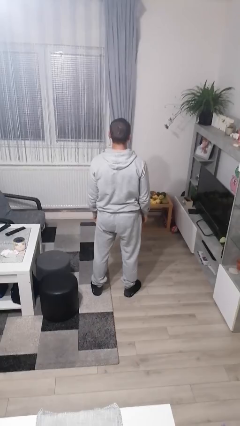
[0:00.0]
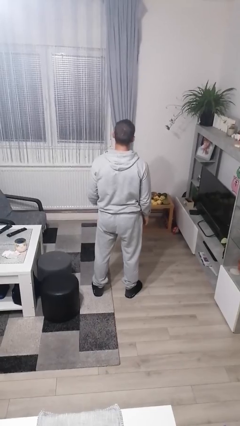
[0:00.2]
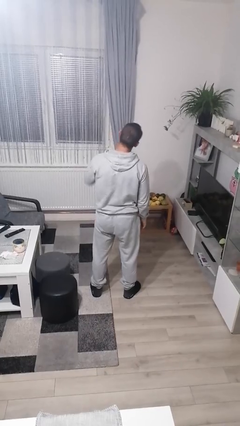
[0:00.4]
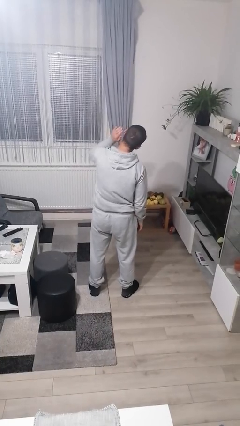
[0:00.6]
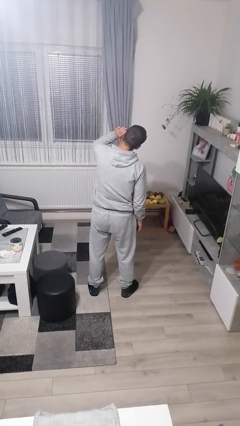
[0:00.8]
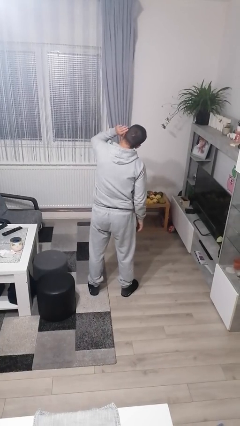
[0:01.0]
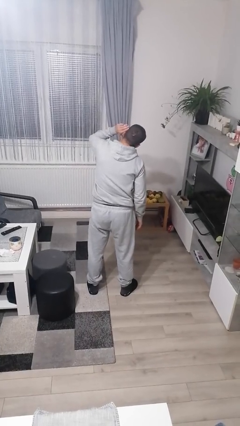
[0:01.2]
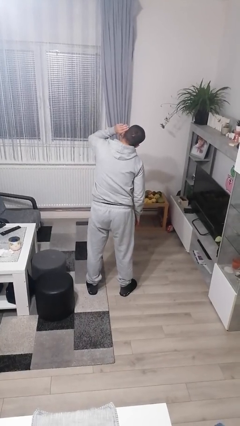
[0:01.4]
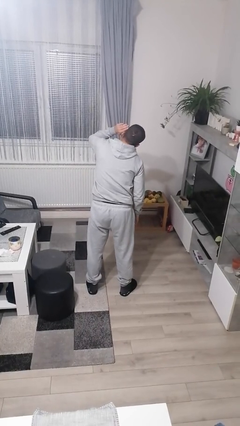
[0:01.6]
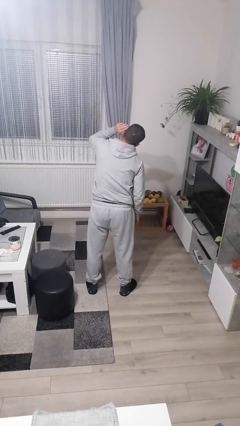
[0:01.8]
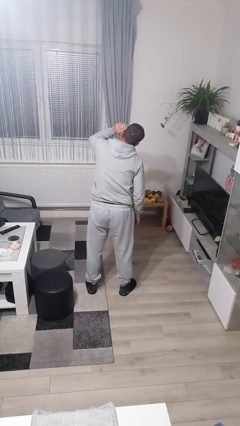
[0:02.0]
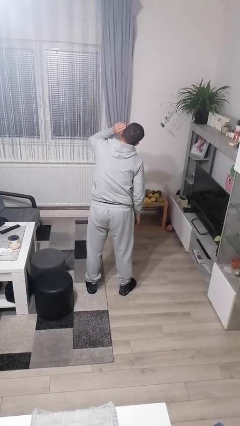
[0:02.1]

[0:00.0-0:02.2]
person gestures listen closely

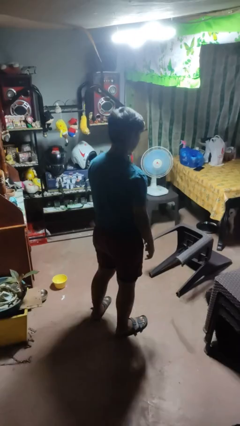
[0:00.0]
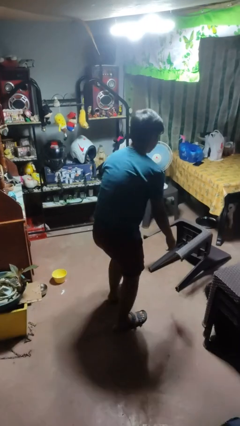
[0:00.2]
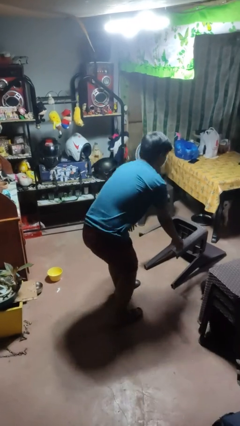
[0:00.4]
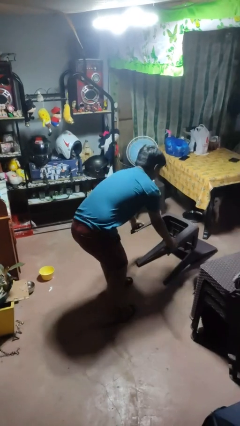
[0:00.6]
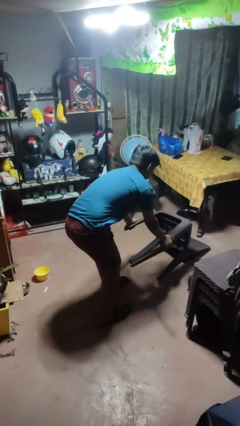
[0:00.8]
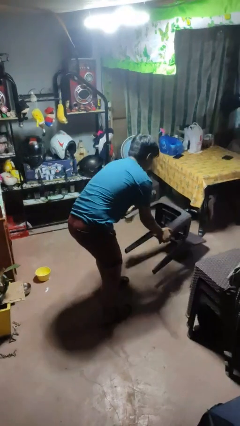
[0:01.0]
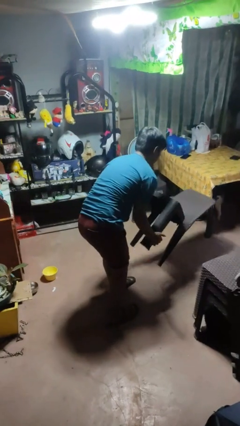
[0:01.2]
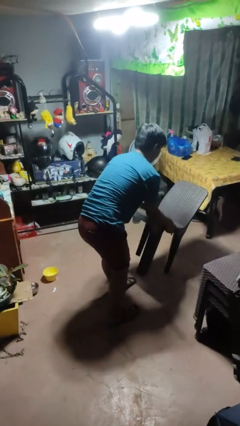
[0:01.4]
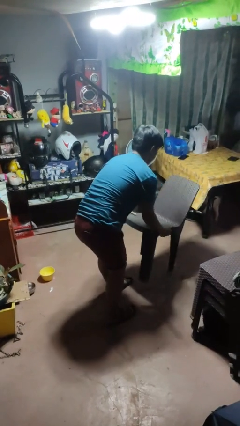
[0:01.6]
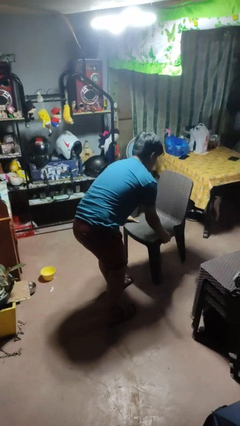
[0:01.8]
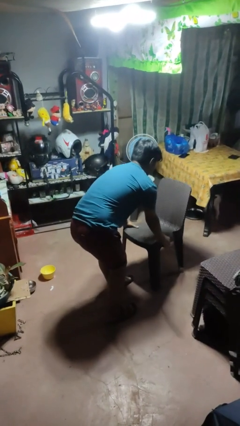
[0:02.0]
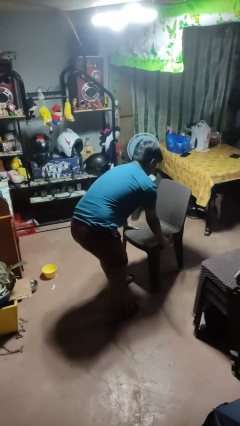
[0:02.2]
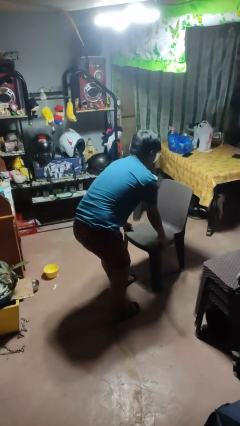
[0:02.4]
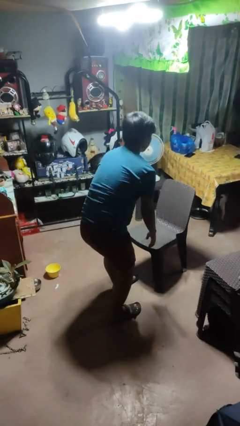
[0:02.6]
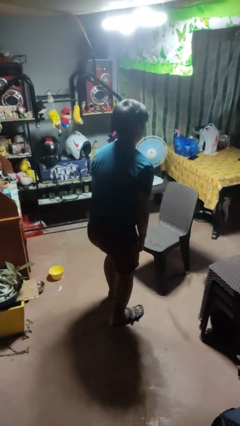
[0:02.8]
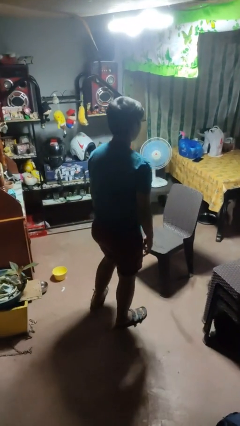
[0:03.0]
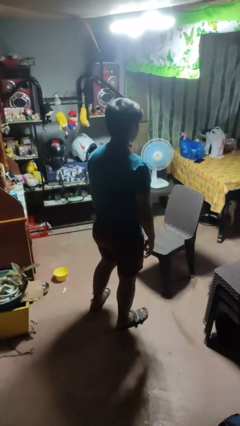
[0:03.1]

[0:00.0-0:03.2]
person sets upright furniture

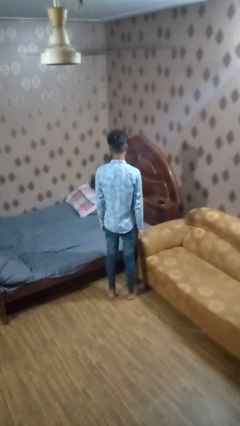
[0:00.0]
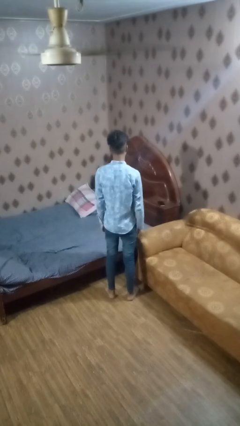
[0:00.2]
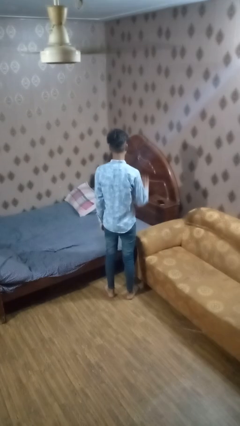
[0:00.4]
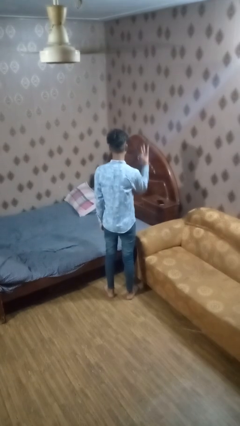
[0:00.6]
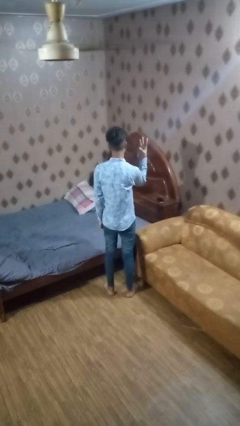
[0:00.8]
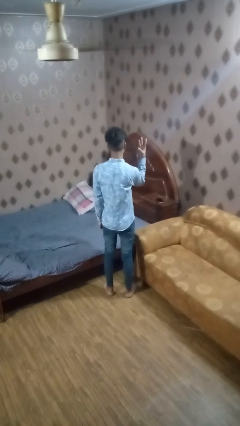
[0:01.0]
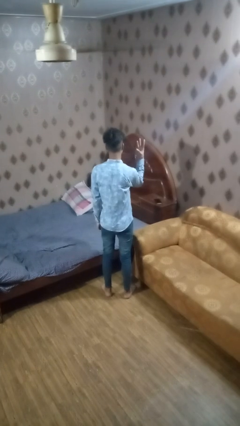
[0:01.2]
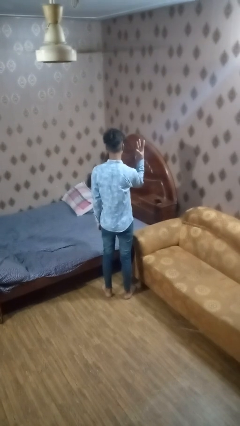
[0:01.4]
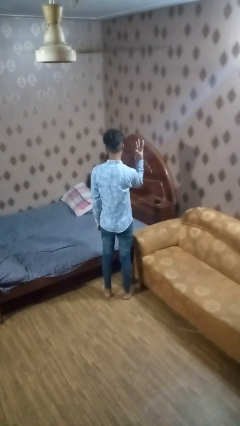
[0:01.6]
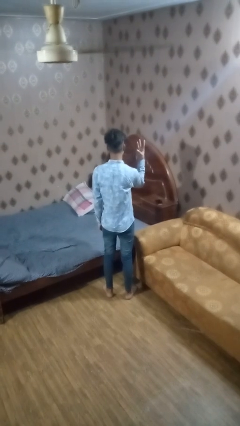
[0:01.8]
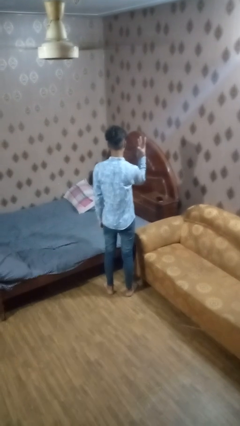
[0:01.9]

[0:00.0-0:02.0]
person gestures number three

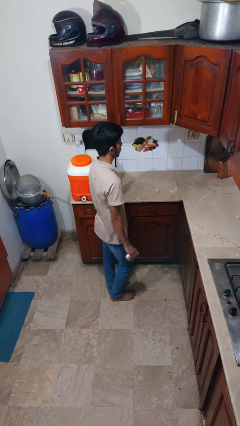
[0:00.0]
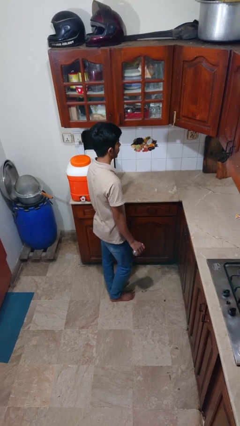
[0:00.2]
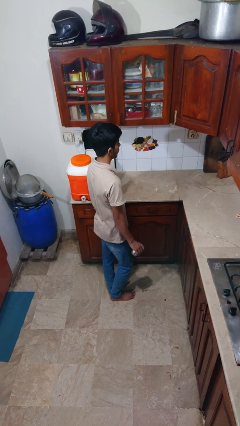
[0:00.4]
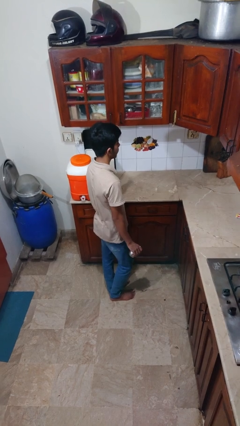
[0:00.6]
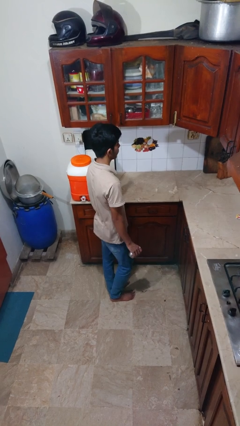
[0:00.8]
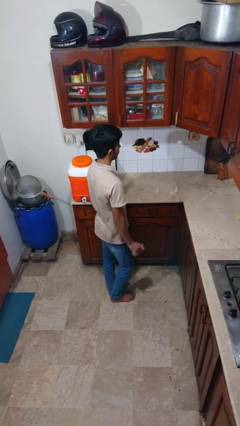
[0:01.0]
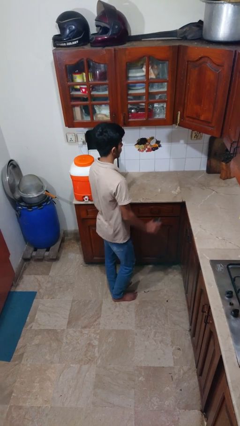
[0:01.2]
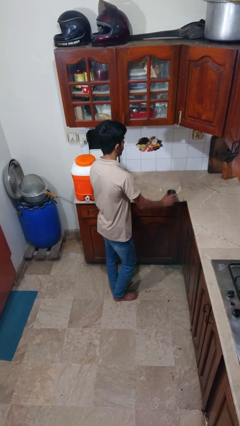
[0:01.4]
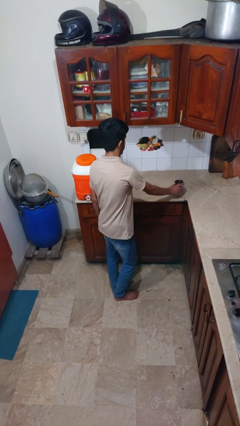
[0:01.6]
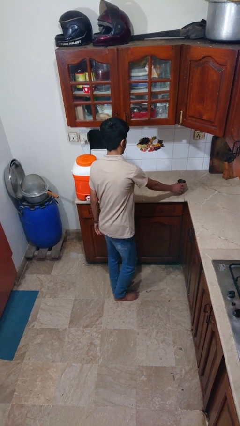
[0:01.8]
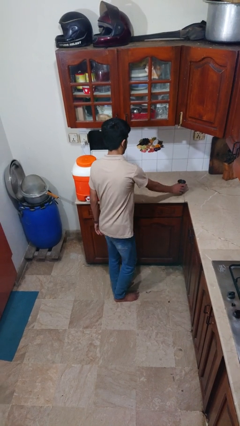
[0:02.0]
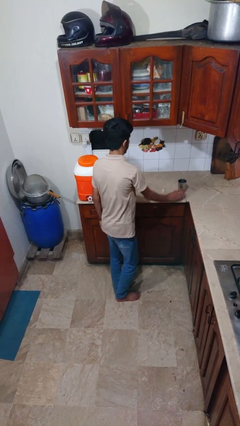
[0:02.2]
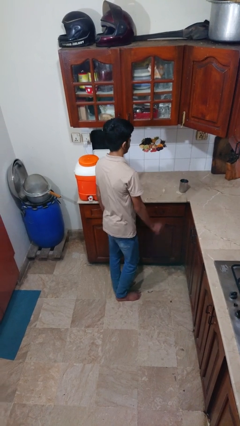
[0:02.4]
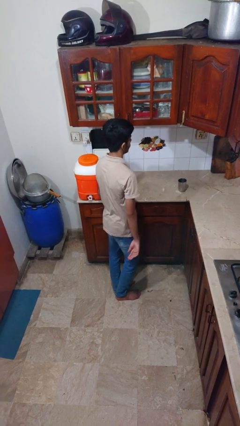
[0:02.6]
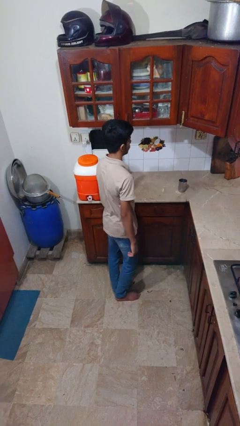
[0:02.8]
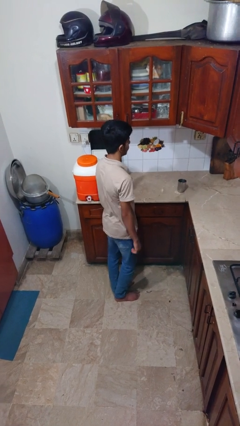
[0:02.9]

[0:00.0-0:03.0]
person puts down object on countertop

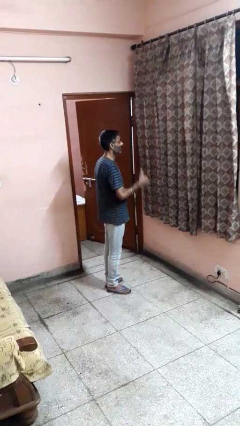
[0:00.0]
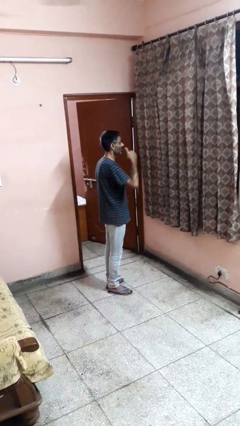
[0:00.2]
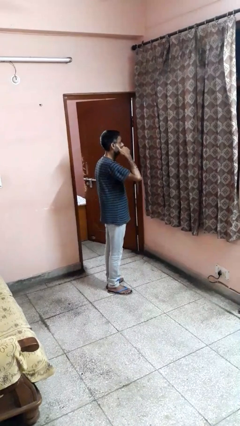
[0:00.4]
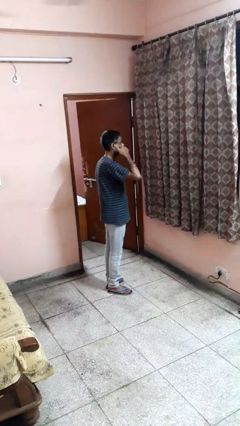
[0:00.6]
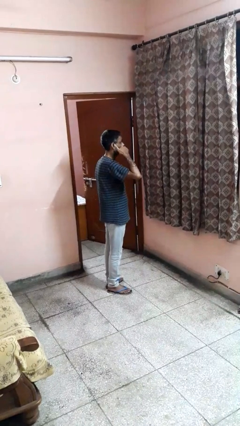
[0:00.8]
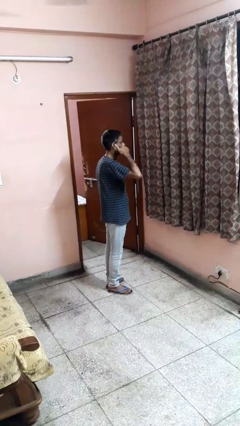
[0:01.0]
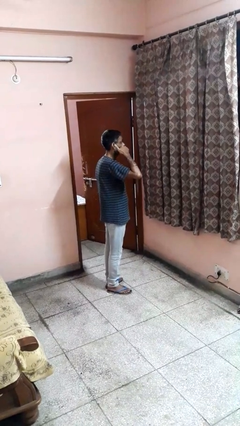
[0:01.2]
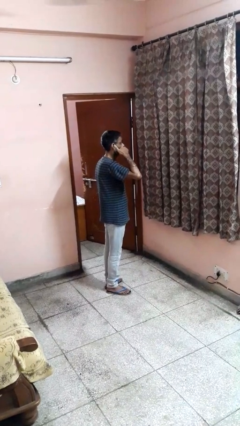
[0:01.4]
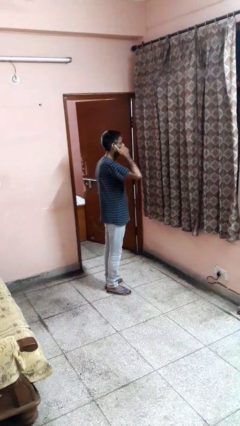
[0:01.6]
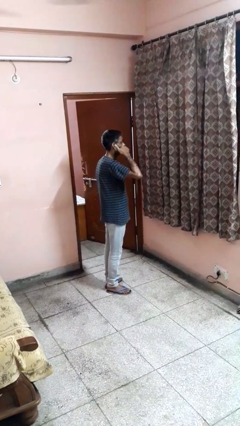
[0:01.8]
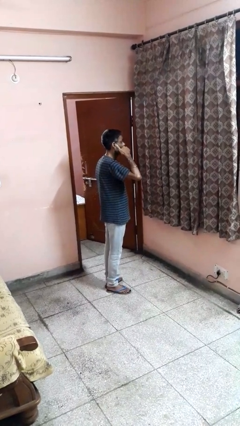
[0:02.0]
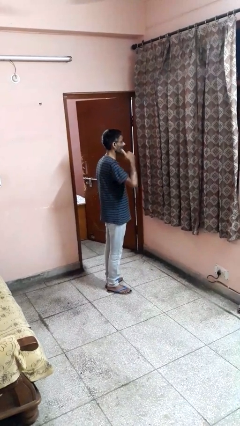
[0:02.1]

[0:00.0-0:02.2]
person gestures call me

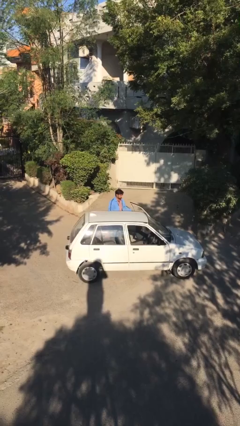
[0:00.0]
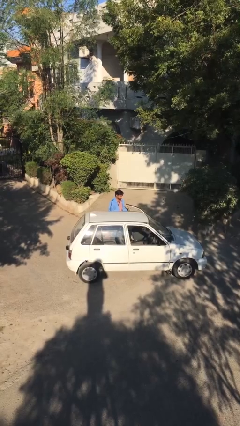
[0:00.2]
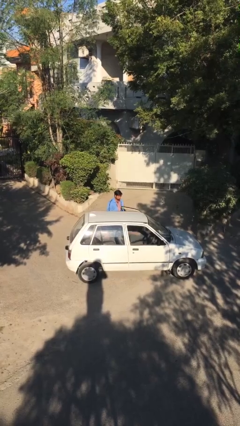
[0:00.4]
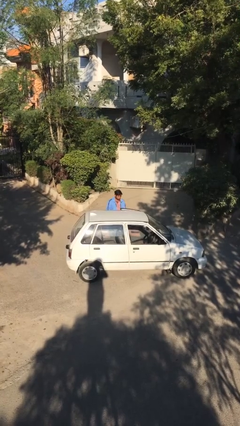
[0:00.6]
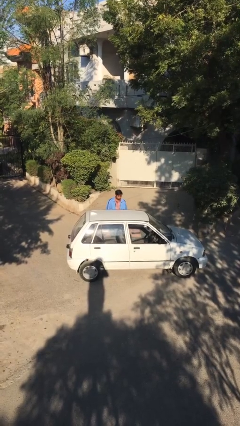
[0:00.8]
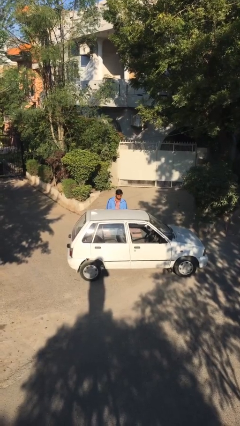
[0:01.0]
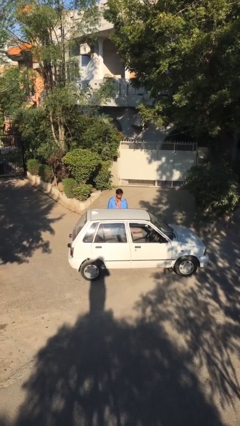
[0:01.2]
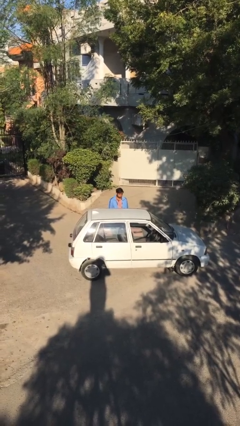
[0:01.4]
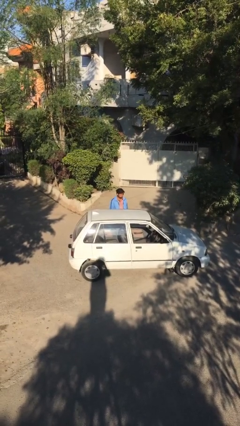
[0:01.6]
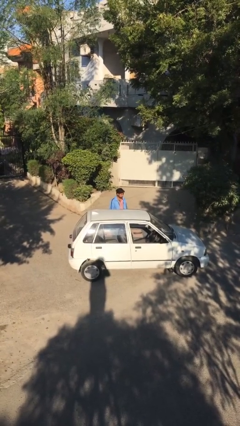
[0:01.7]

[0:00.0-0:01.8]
person closes car door

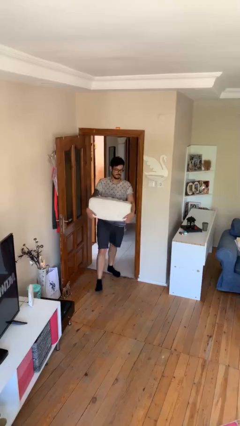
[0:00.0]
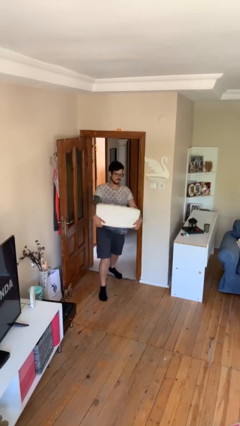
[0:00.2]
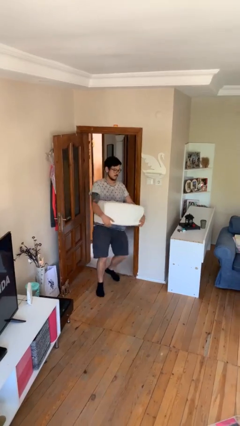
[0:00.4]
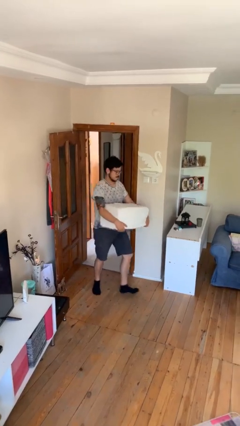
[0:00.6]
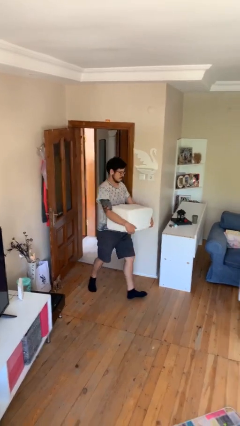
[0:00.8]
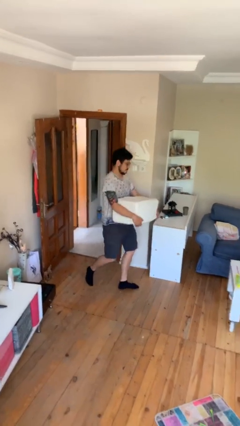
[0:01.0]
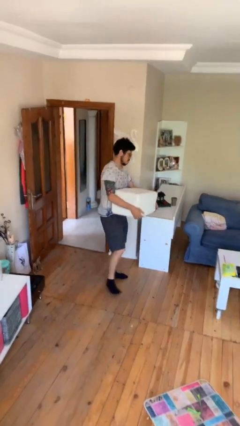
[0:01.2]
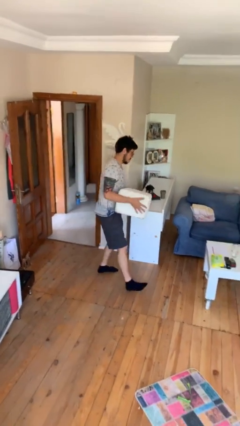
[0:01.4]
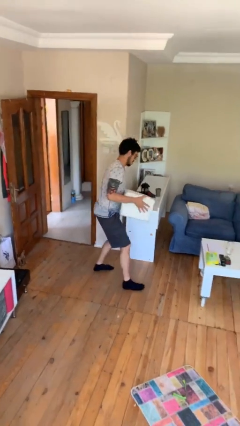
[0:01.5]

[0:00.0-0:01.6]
person carries heavy object

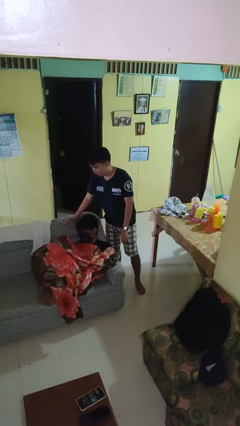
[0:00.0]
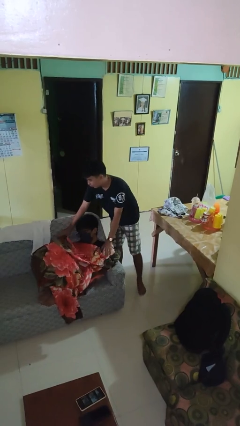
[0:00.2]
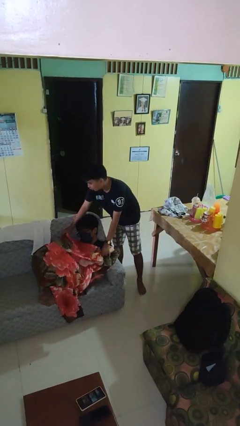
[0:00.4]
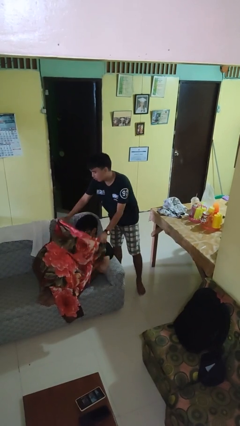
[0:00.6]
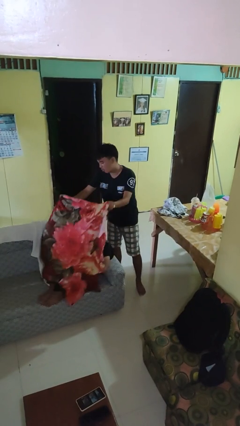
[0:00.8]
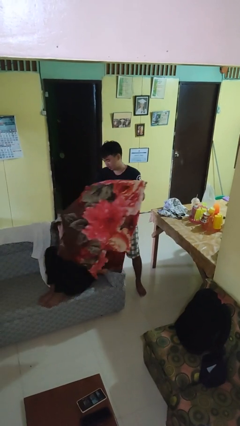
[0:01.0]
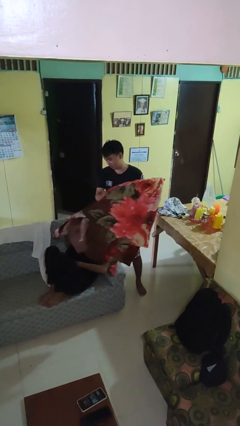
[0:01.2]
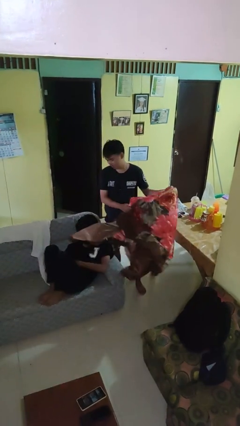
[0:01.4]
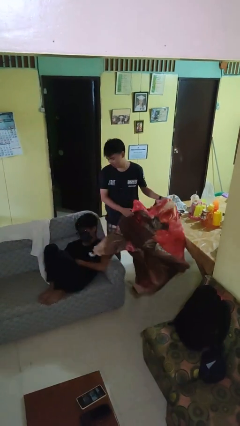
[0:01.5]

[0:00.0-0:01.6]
person uncovers friend with blanket
